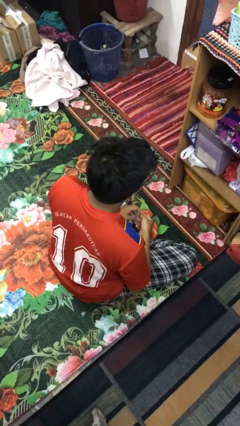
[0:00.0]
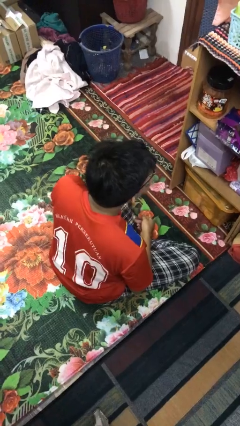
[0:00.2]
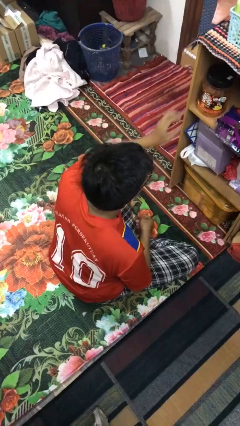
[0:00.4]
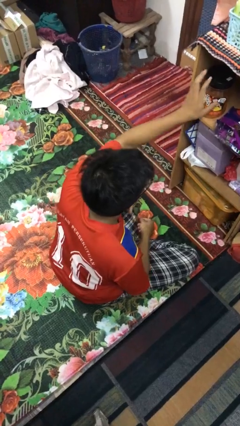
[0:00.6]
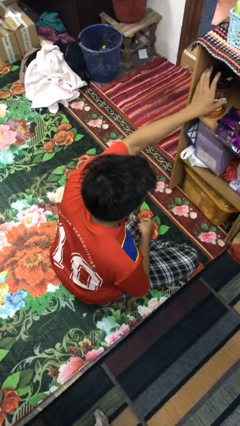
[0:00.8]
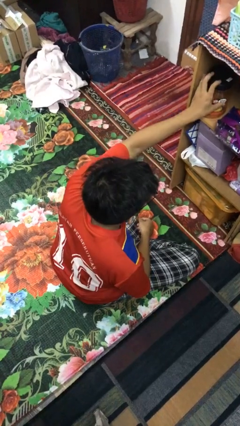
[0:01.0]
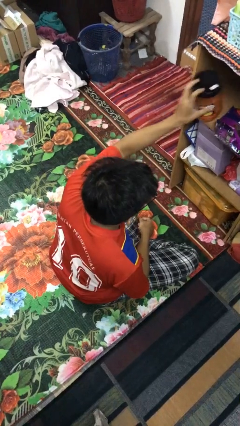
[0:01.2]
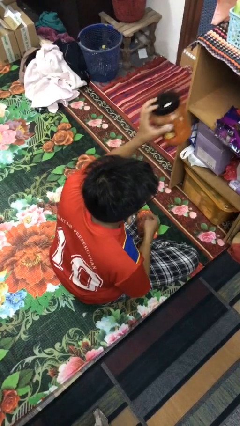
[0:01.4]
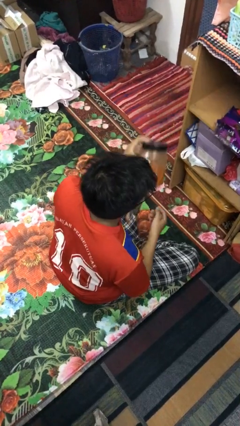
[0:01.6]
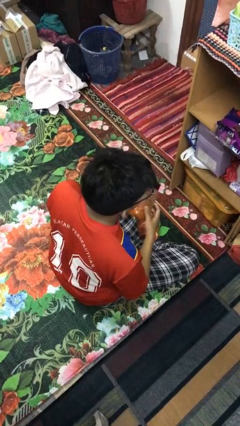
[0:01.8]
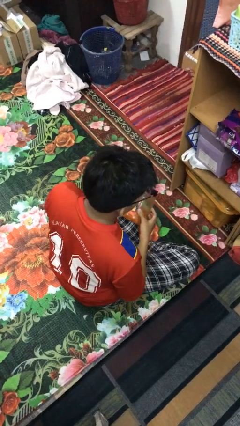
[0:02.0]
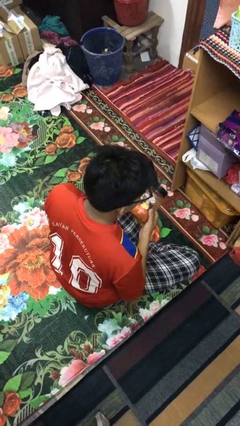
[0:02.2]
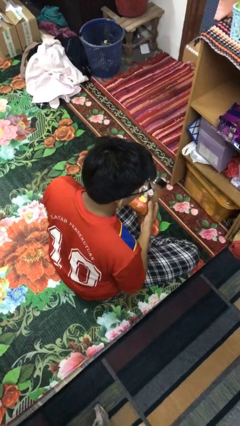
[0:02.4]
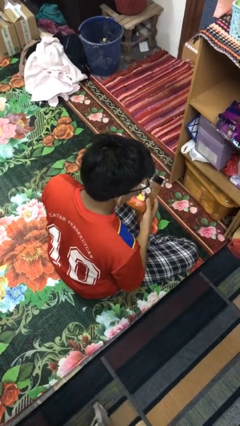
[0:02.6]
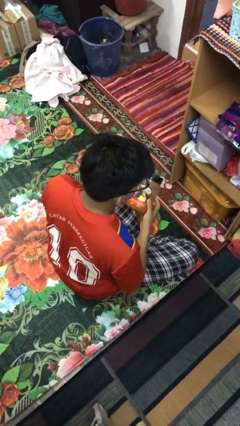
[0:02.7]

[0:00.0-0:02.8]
person picks up object from cabinet

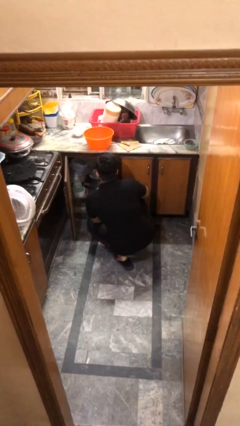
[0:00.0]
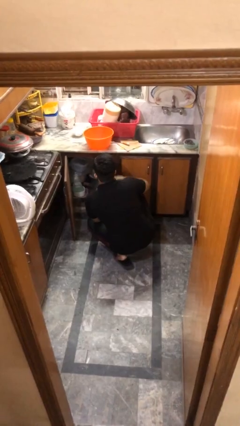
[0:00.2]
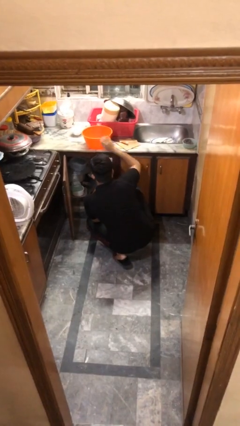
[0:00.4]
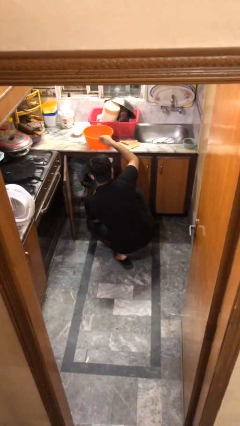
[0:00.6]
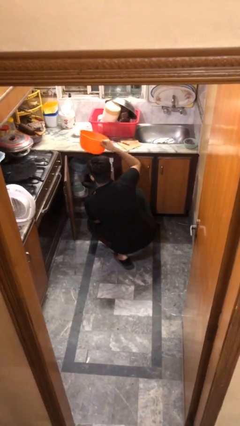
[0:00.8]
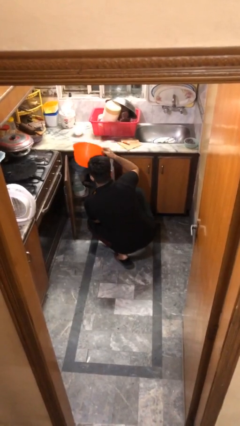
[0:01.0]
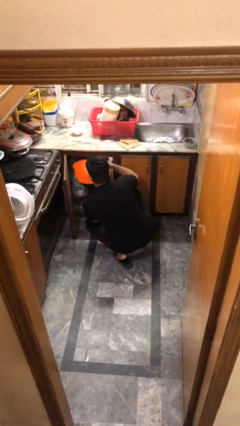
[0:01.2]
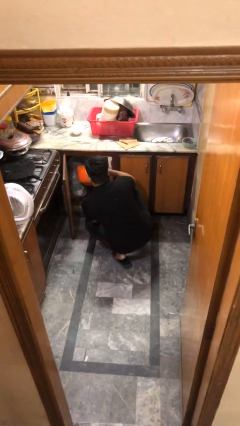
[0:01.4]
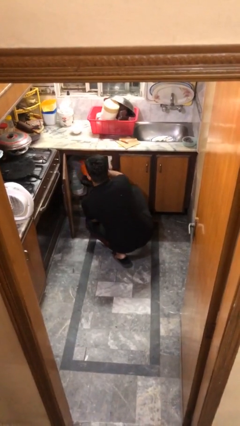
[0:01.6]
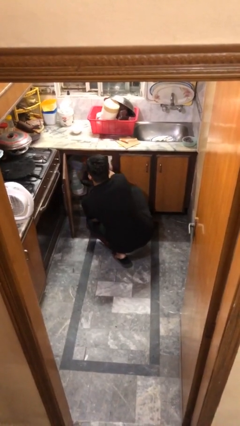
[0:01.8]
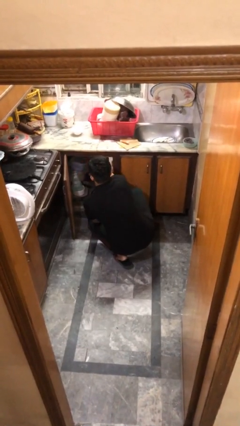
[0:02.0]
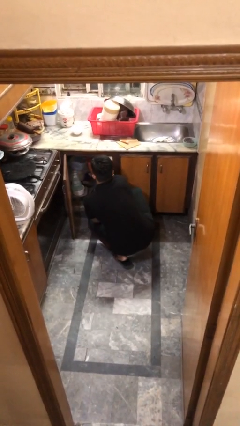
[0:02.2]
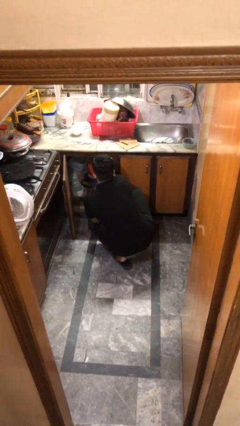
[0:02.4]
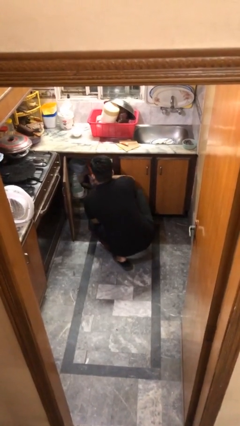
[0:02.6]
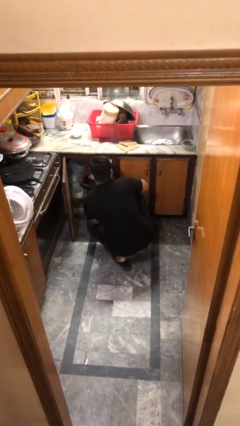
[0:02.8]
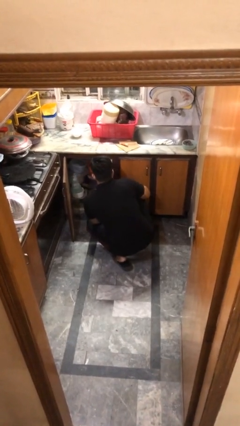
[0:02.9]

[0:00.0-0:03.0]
person puts object into kitchen drawer

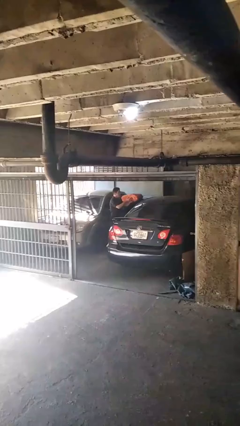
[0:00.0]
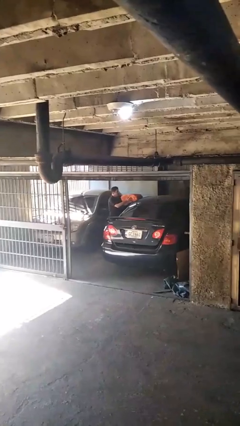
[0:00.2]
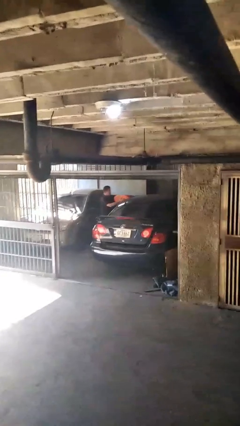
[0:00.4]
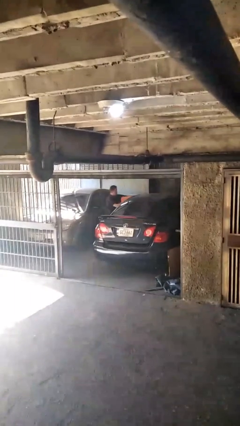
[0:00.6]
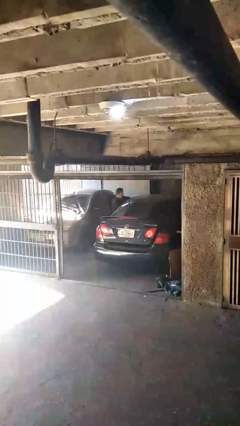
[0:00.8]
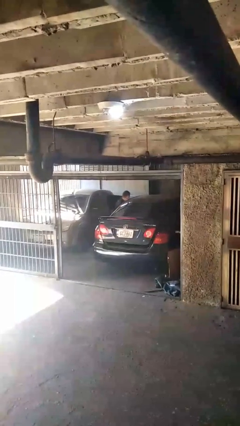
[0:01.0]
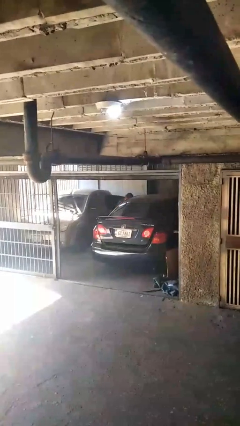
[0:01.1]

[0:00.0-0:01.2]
person loads car

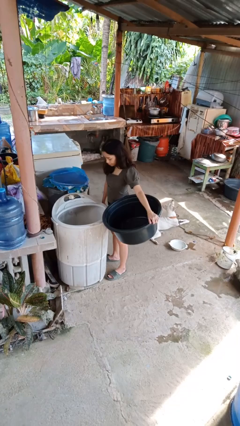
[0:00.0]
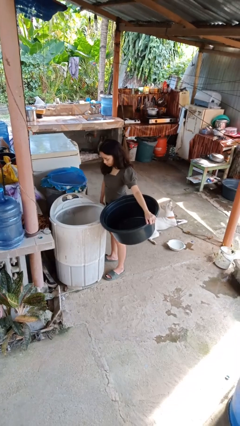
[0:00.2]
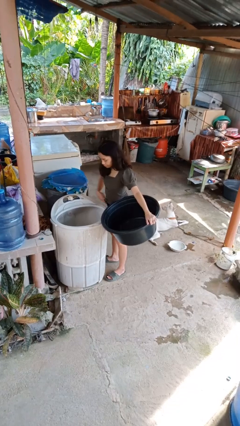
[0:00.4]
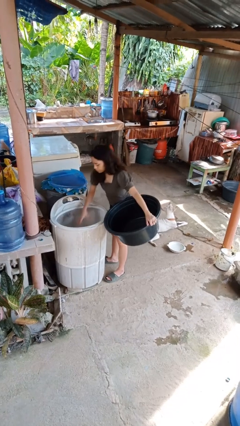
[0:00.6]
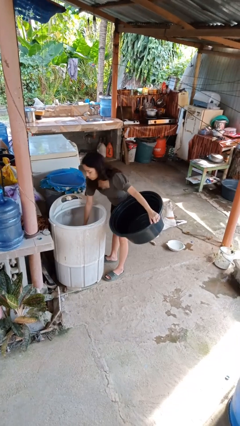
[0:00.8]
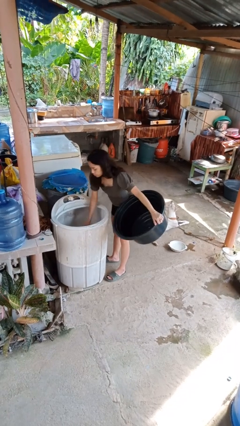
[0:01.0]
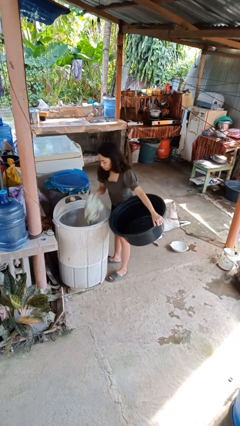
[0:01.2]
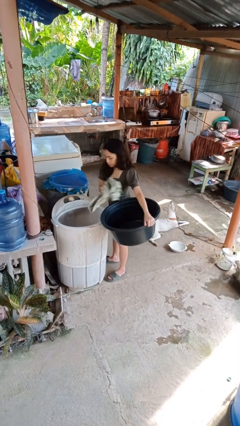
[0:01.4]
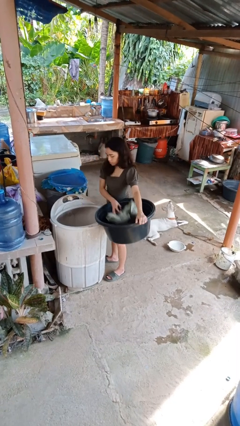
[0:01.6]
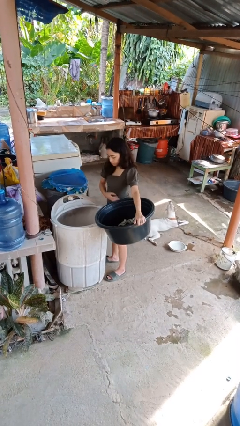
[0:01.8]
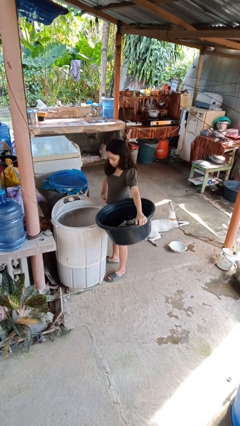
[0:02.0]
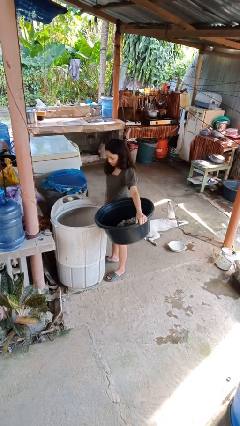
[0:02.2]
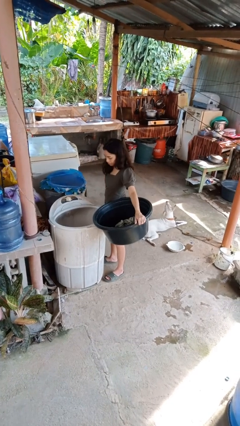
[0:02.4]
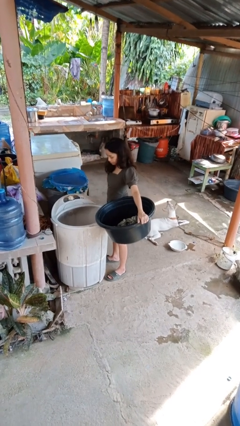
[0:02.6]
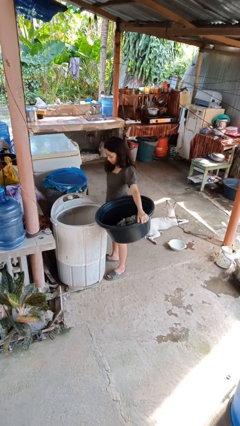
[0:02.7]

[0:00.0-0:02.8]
person unloads clotheswasher

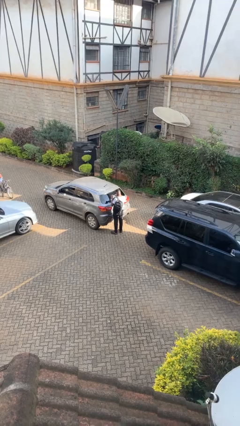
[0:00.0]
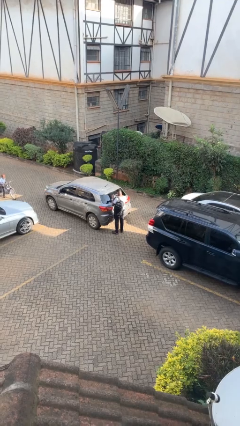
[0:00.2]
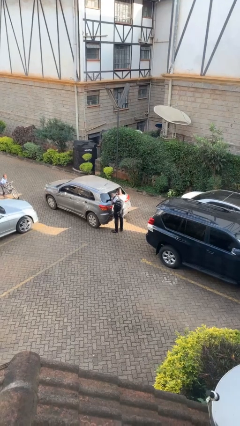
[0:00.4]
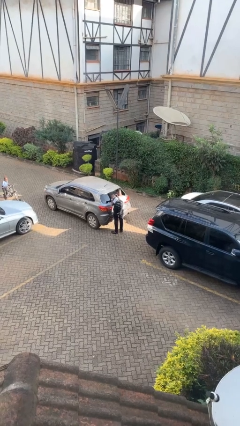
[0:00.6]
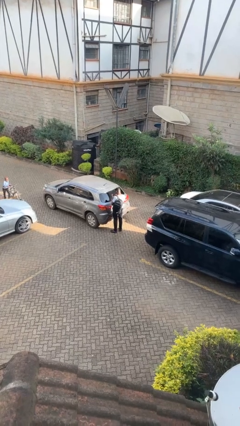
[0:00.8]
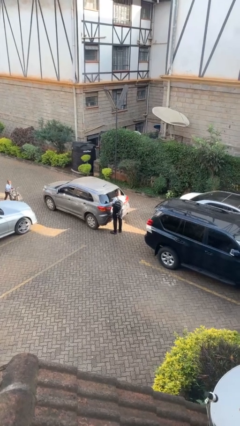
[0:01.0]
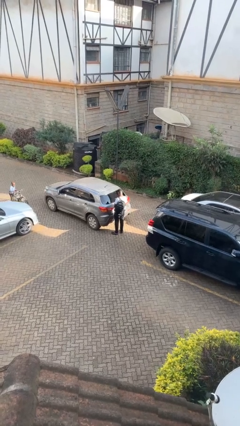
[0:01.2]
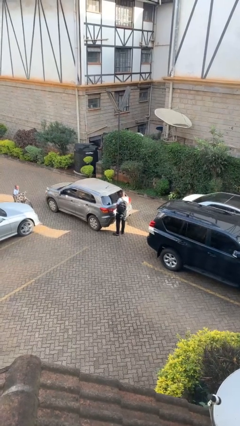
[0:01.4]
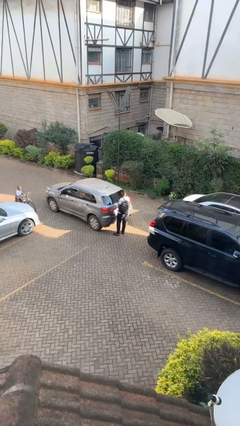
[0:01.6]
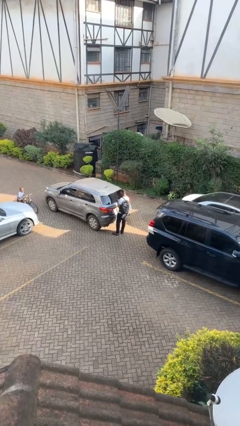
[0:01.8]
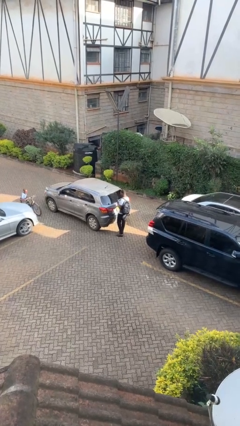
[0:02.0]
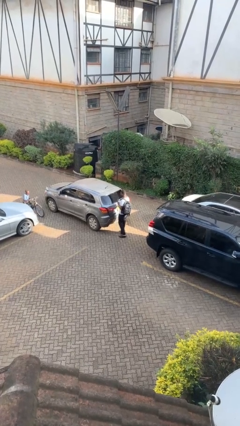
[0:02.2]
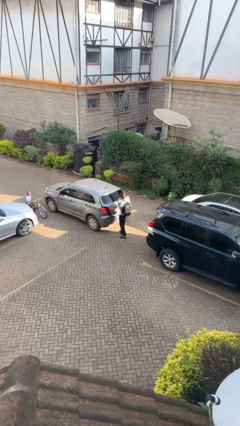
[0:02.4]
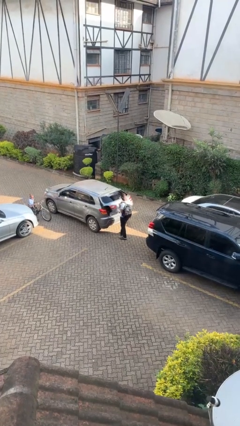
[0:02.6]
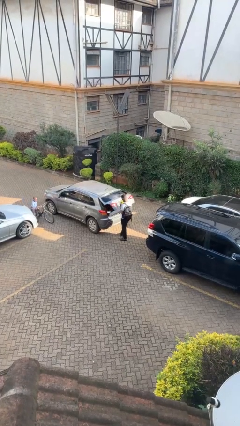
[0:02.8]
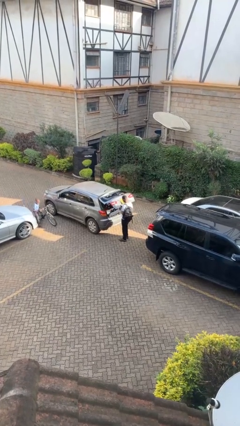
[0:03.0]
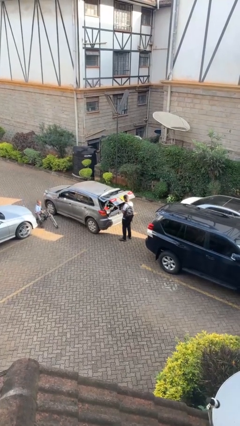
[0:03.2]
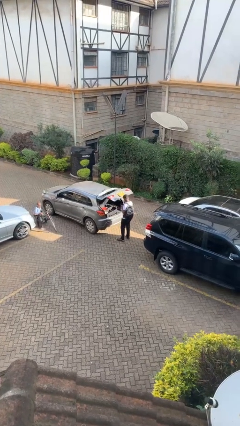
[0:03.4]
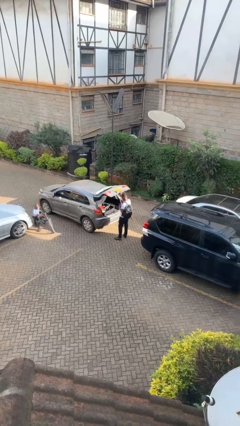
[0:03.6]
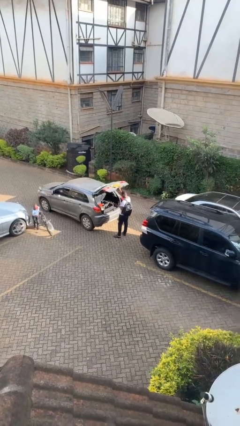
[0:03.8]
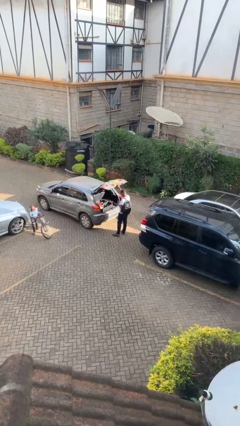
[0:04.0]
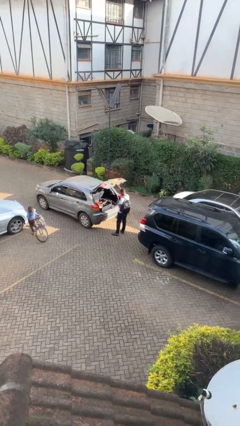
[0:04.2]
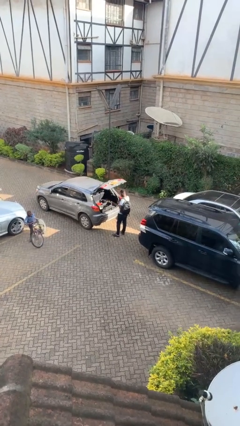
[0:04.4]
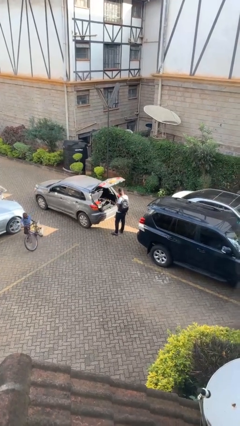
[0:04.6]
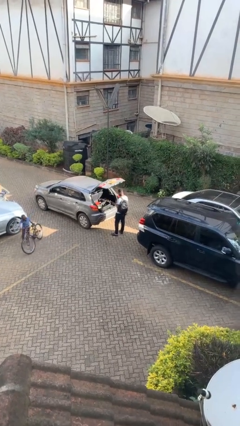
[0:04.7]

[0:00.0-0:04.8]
person opens car trunk

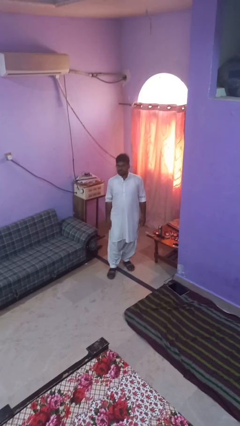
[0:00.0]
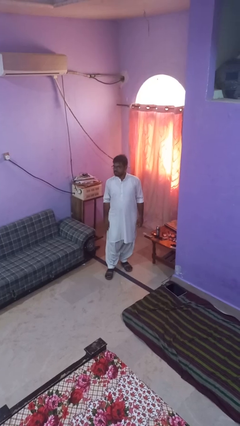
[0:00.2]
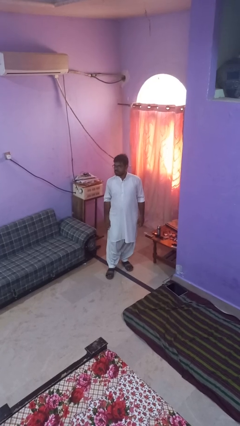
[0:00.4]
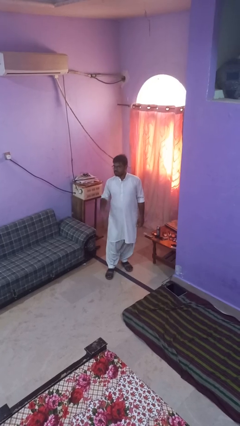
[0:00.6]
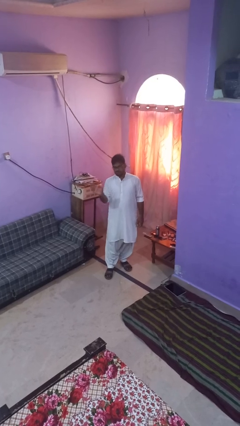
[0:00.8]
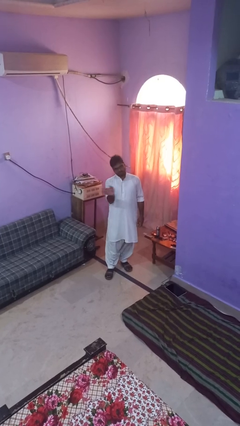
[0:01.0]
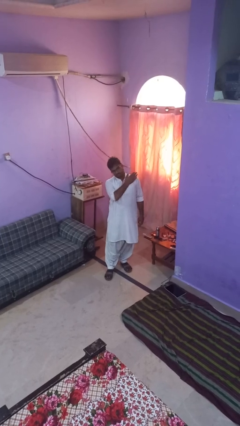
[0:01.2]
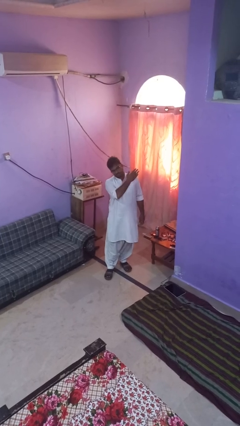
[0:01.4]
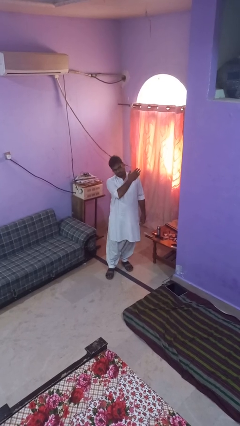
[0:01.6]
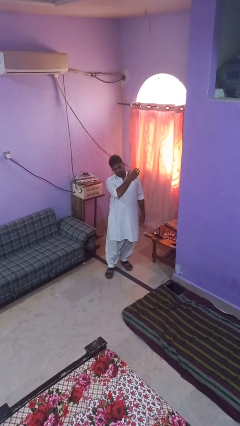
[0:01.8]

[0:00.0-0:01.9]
person gestures swipe left

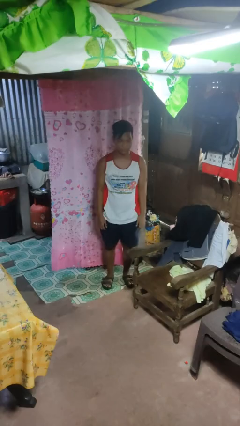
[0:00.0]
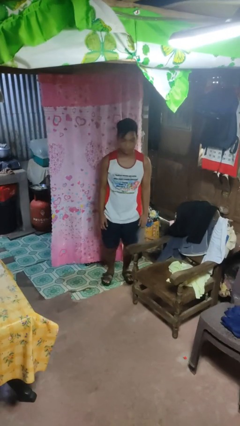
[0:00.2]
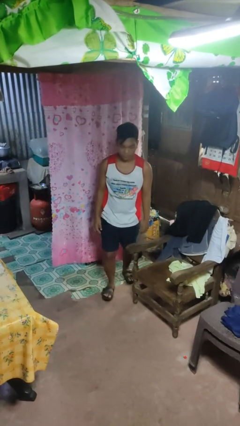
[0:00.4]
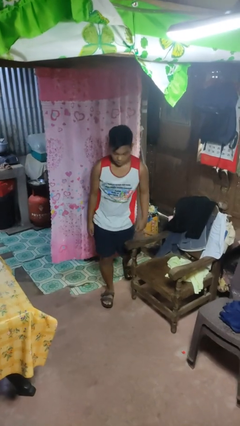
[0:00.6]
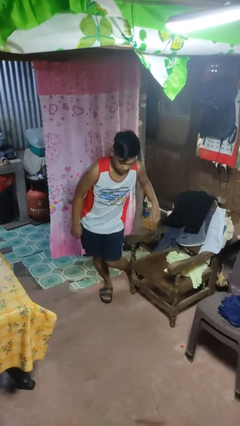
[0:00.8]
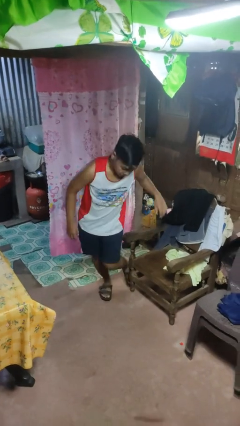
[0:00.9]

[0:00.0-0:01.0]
person trips on object on floor
